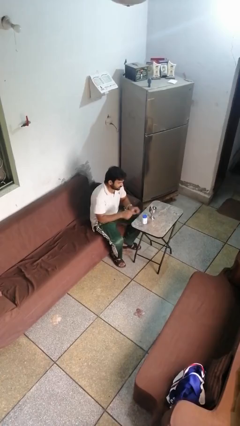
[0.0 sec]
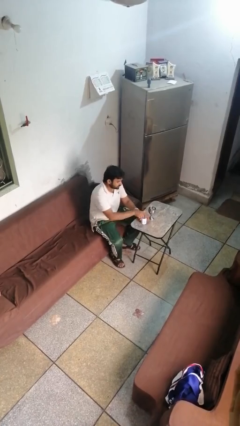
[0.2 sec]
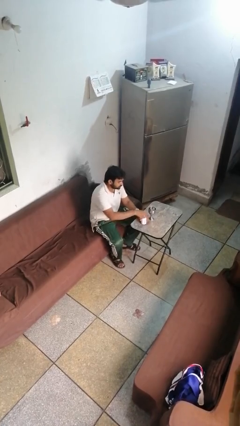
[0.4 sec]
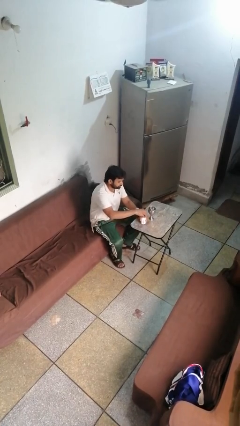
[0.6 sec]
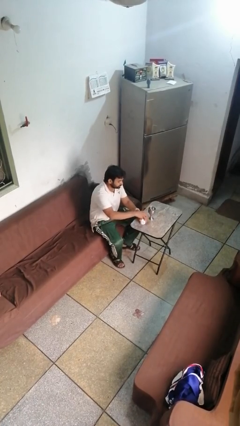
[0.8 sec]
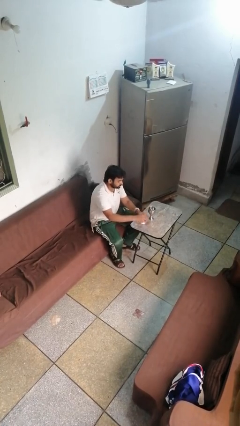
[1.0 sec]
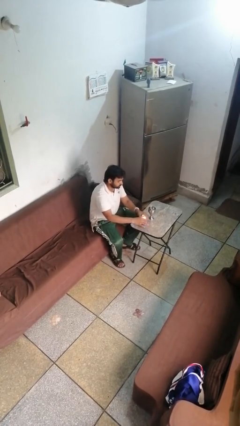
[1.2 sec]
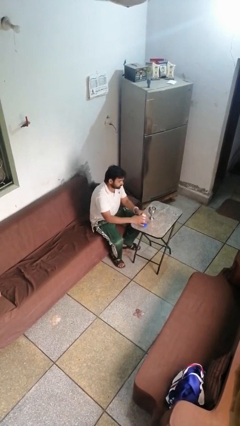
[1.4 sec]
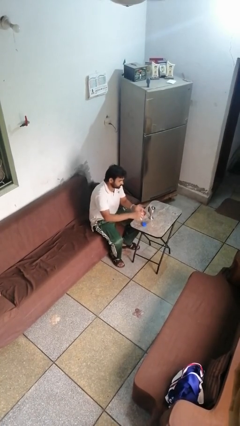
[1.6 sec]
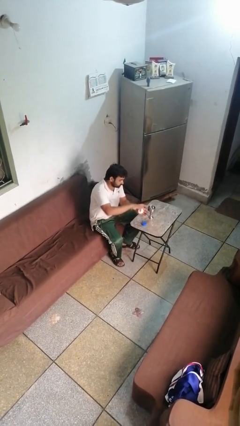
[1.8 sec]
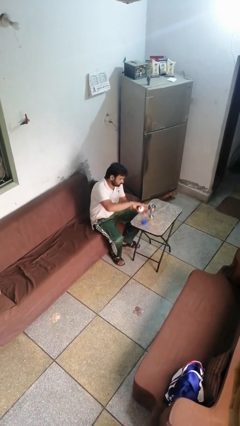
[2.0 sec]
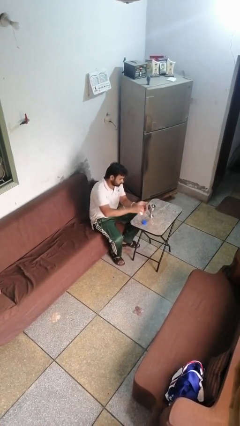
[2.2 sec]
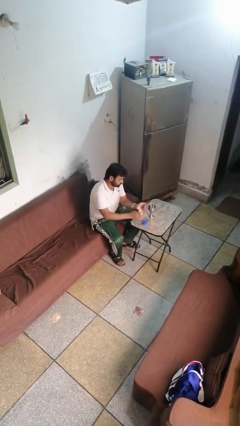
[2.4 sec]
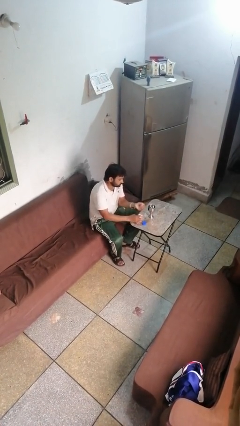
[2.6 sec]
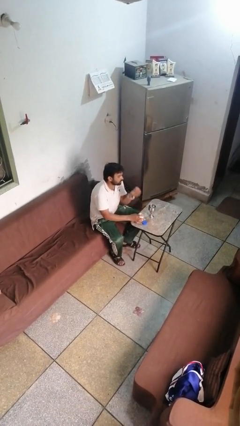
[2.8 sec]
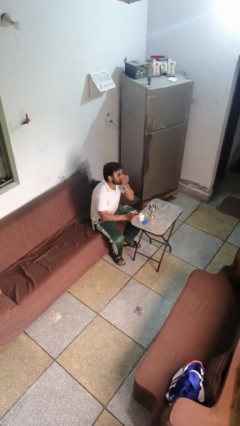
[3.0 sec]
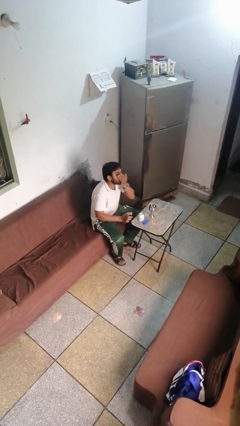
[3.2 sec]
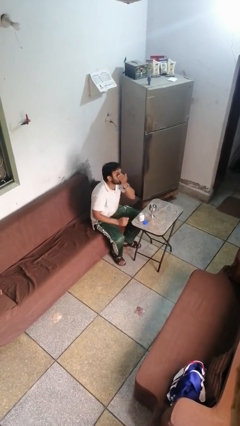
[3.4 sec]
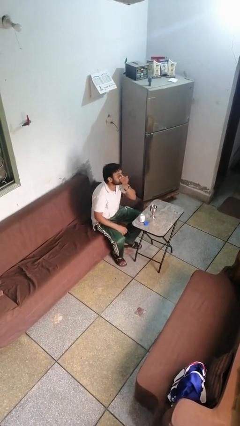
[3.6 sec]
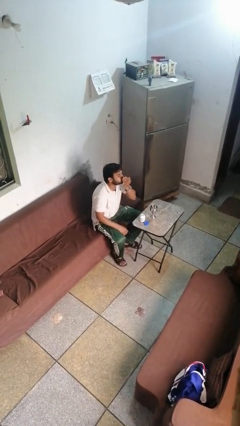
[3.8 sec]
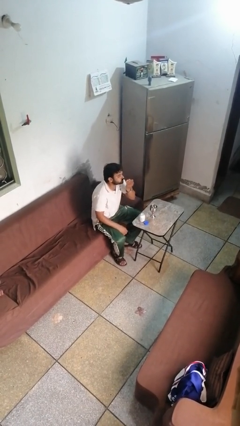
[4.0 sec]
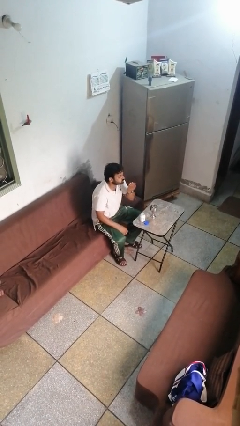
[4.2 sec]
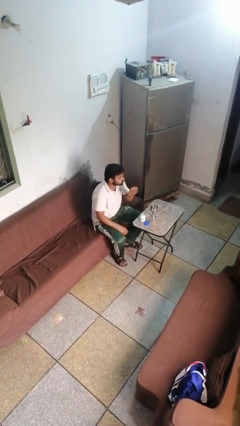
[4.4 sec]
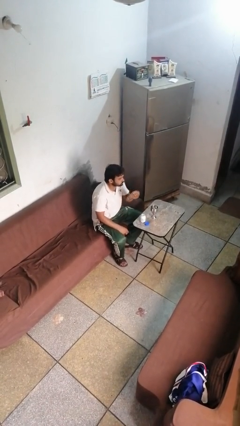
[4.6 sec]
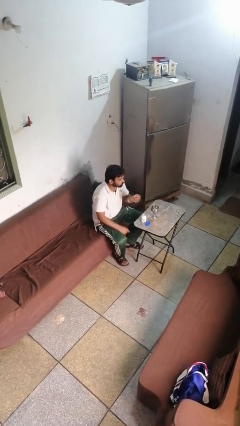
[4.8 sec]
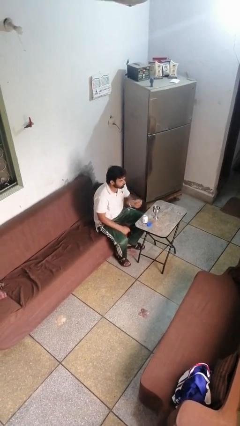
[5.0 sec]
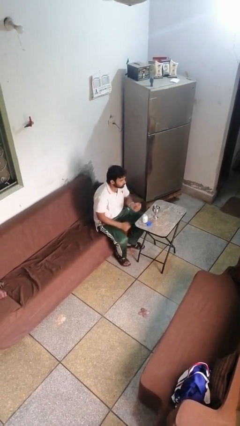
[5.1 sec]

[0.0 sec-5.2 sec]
person takes medicine pills

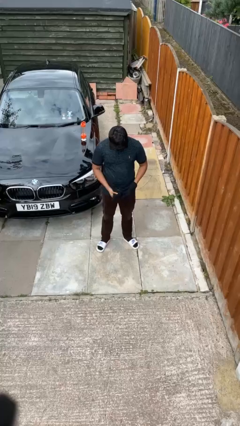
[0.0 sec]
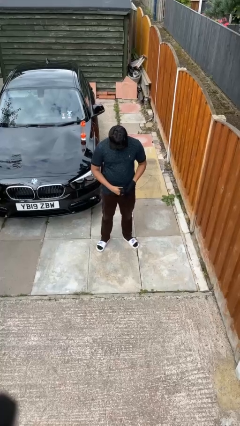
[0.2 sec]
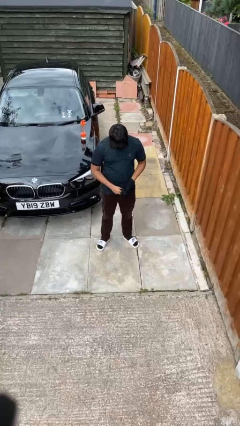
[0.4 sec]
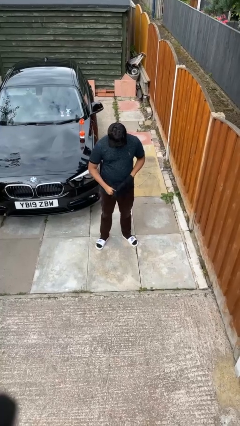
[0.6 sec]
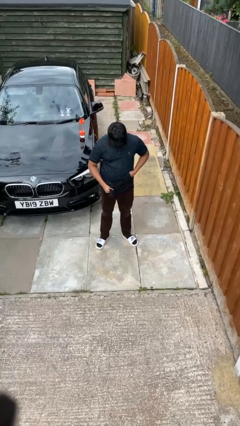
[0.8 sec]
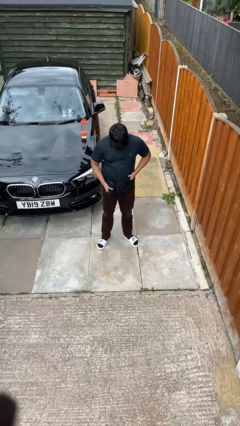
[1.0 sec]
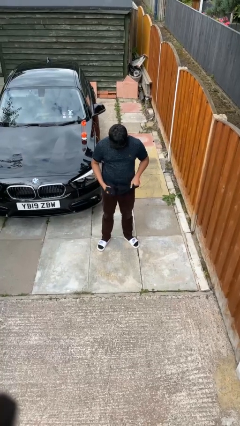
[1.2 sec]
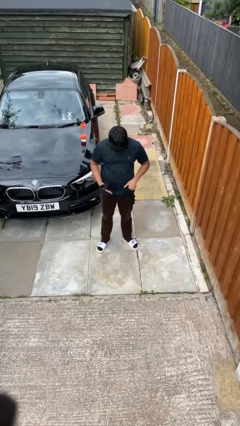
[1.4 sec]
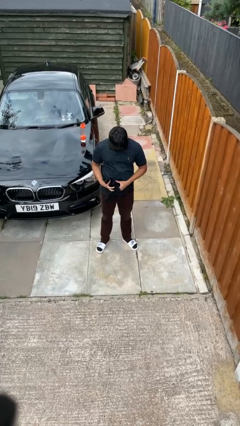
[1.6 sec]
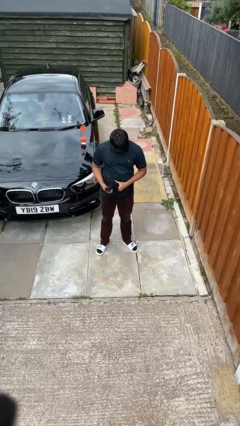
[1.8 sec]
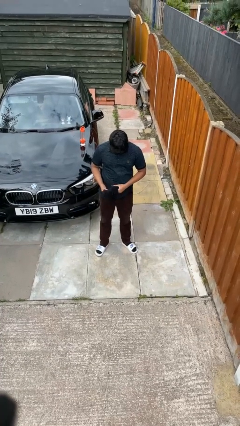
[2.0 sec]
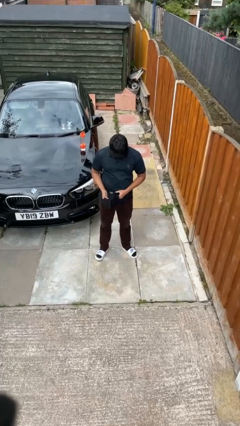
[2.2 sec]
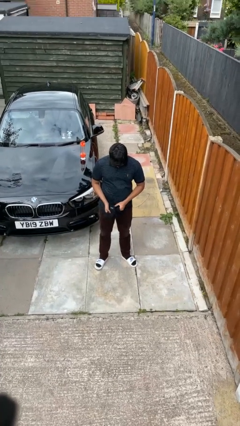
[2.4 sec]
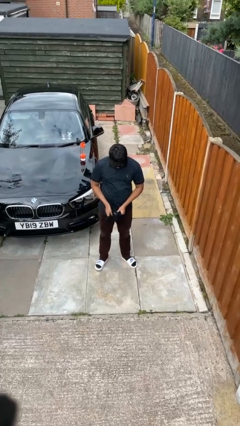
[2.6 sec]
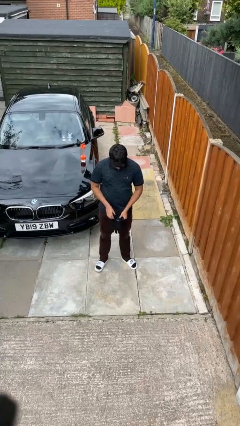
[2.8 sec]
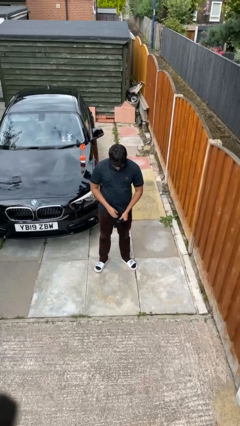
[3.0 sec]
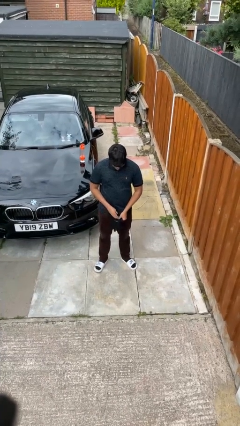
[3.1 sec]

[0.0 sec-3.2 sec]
person takes off gloves

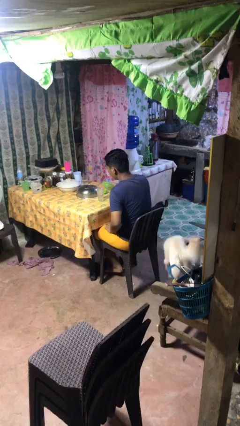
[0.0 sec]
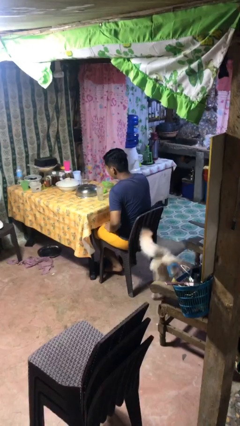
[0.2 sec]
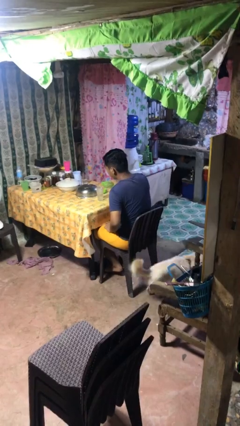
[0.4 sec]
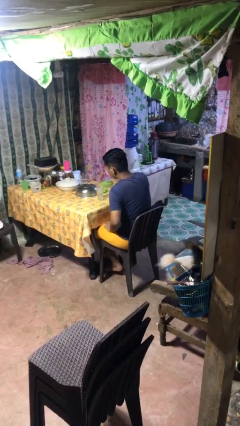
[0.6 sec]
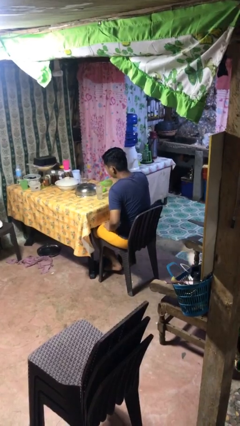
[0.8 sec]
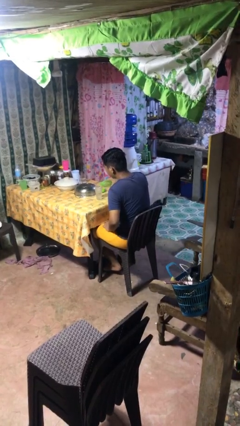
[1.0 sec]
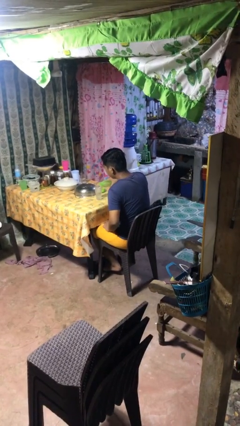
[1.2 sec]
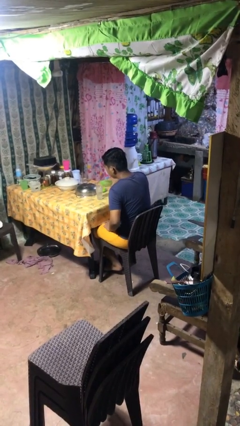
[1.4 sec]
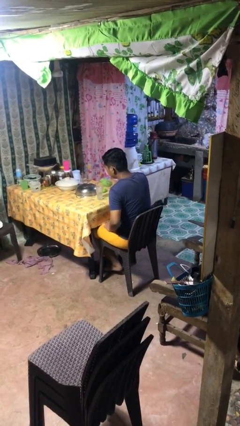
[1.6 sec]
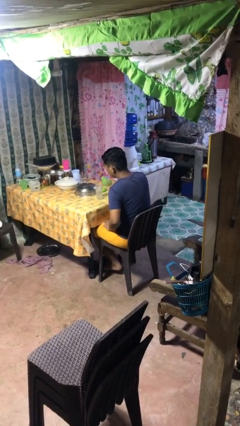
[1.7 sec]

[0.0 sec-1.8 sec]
person pours liquid into cup

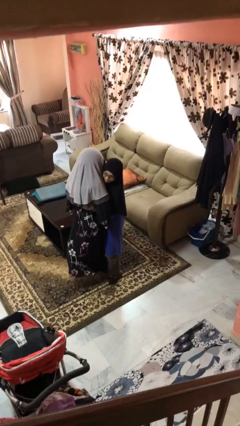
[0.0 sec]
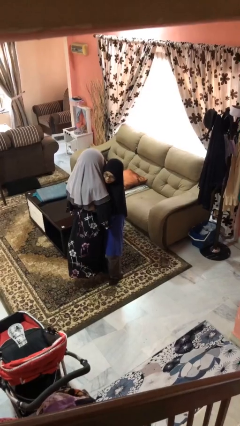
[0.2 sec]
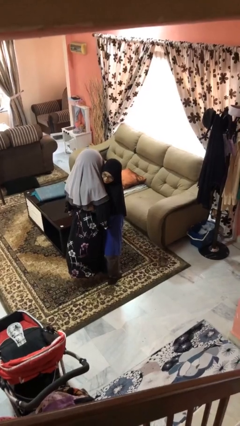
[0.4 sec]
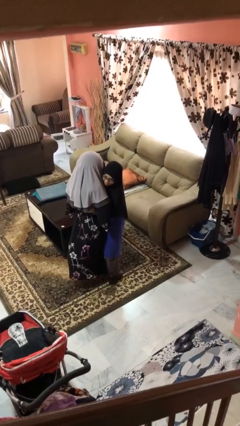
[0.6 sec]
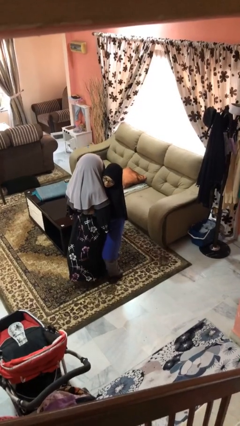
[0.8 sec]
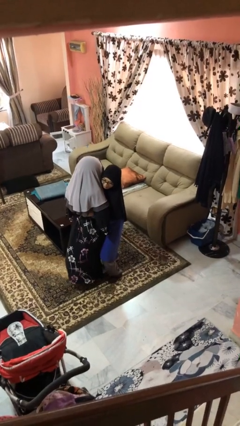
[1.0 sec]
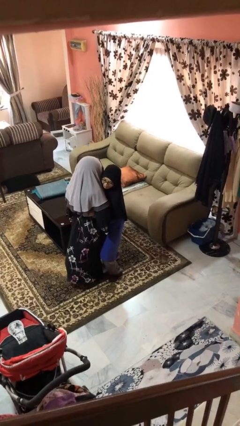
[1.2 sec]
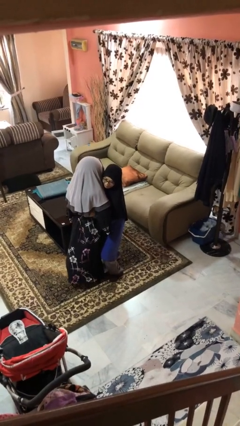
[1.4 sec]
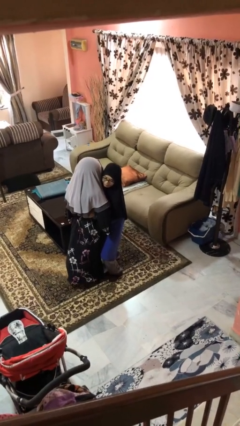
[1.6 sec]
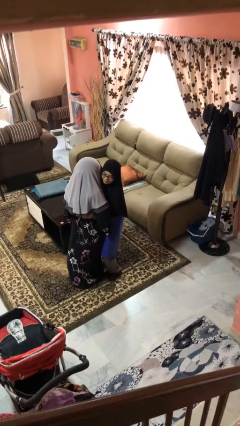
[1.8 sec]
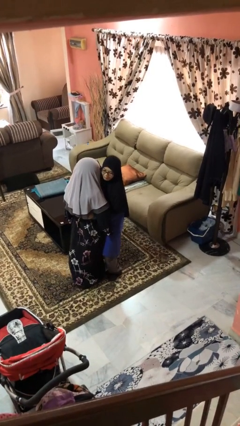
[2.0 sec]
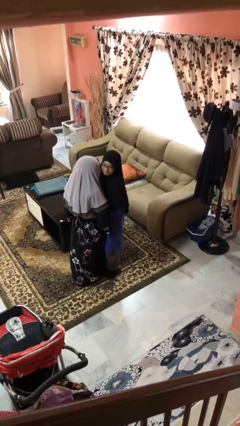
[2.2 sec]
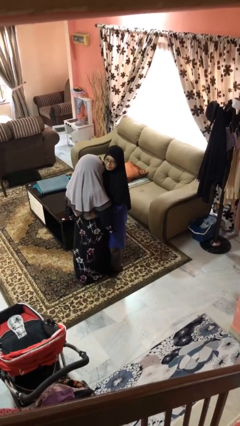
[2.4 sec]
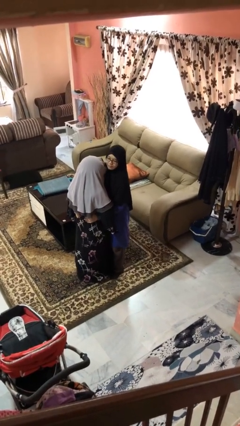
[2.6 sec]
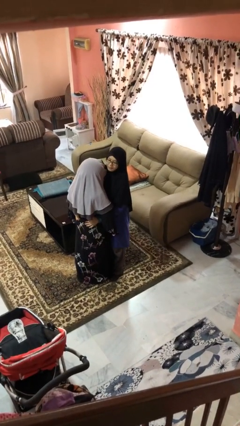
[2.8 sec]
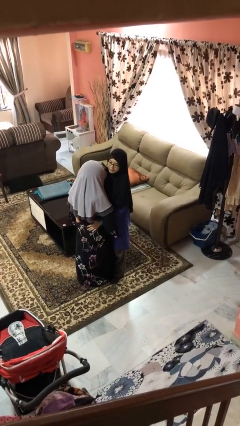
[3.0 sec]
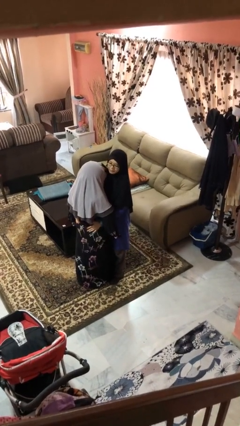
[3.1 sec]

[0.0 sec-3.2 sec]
person puts down person

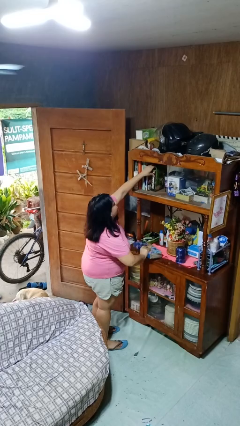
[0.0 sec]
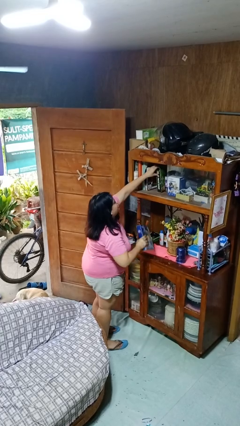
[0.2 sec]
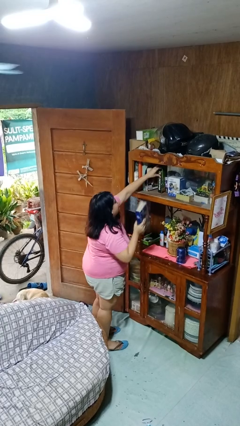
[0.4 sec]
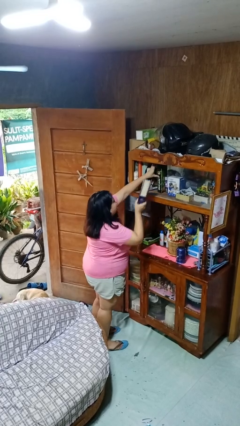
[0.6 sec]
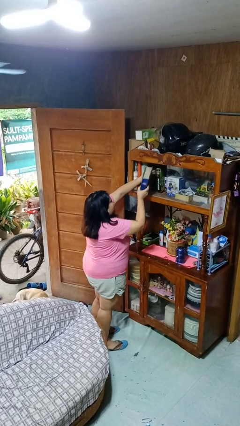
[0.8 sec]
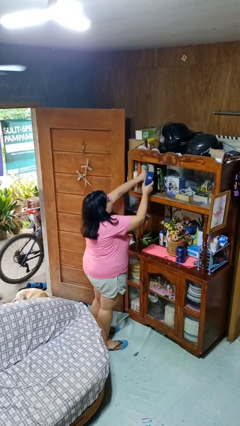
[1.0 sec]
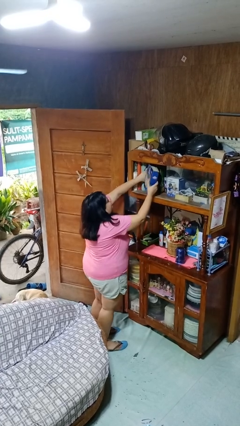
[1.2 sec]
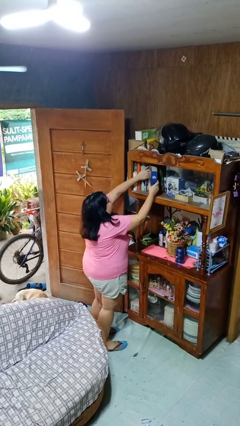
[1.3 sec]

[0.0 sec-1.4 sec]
person puts down object on shelf

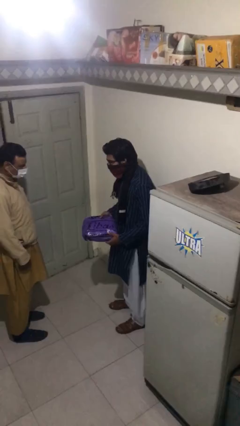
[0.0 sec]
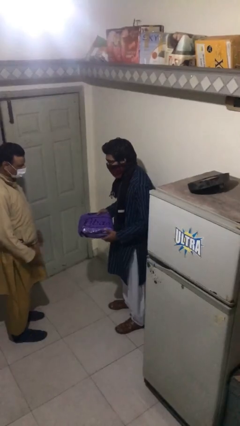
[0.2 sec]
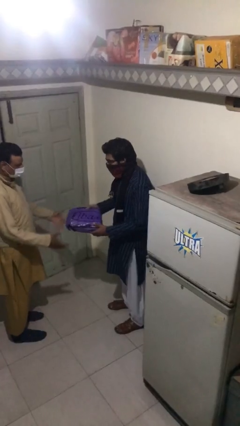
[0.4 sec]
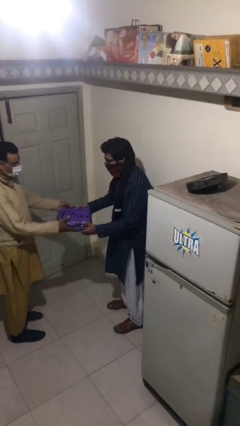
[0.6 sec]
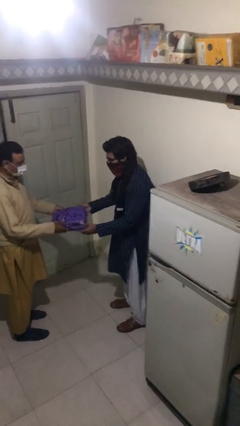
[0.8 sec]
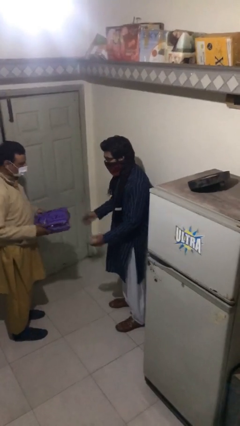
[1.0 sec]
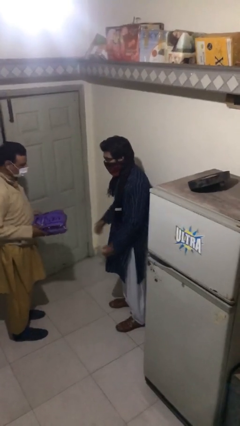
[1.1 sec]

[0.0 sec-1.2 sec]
person transfers object to person

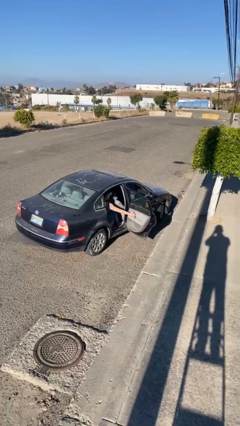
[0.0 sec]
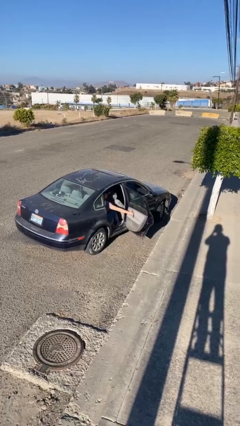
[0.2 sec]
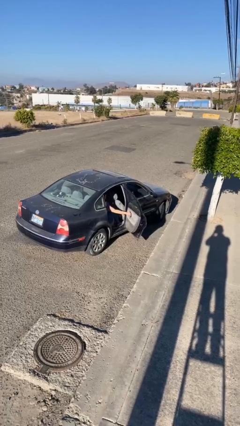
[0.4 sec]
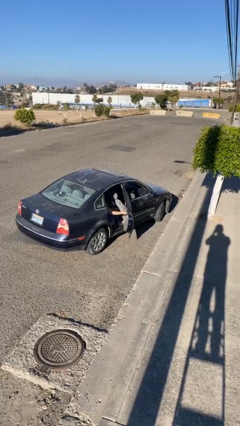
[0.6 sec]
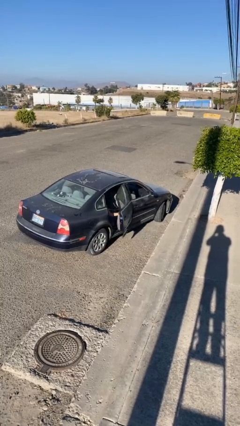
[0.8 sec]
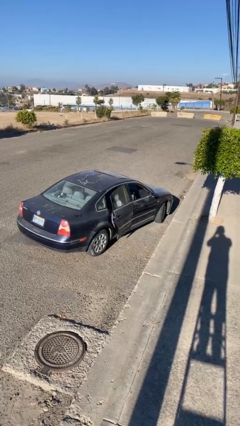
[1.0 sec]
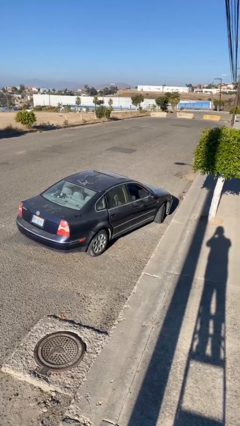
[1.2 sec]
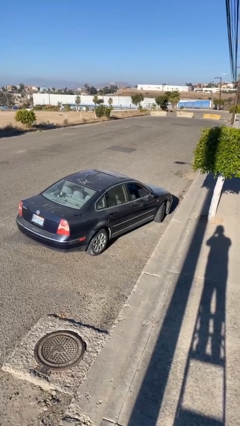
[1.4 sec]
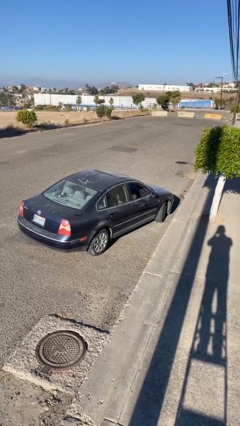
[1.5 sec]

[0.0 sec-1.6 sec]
person closes car door
